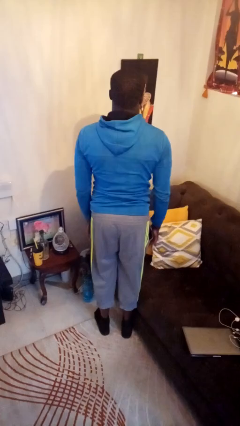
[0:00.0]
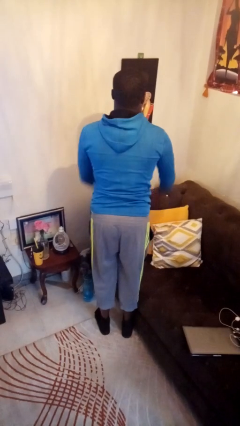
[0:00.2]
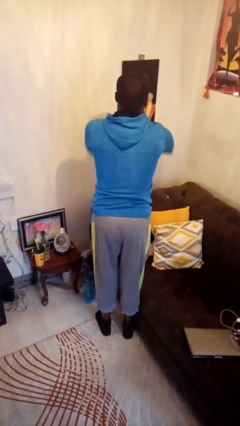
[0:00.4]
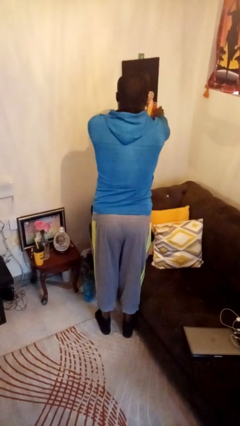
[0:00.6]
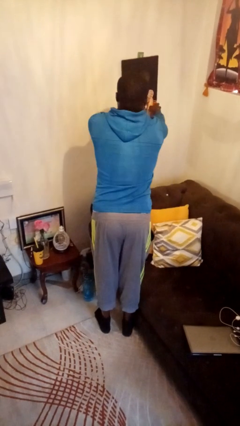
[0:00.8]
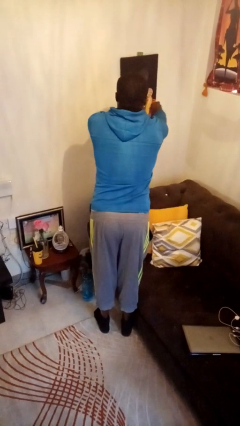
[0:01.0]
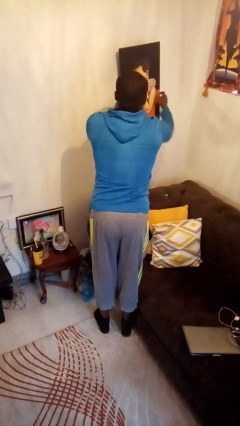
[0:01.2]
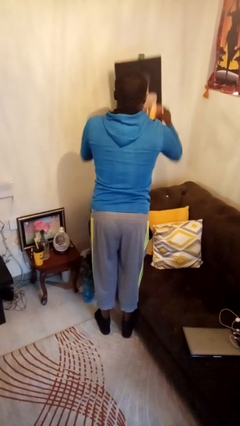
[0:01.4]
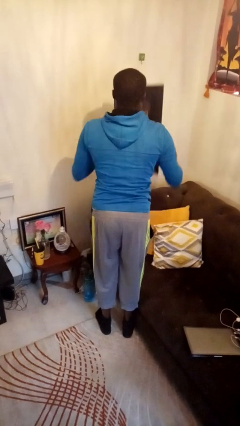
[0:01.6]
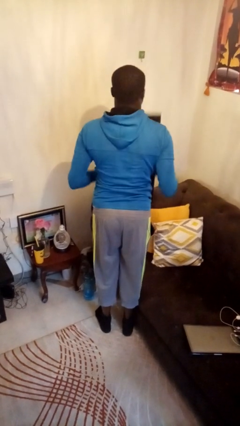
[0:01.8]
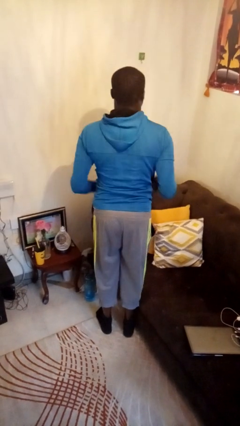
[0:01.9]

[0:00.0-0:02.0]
person takes down picture frame

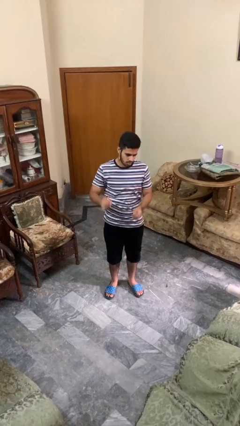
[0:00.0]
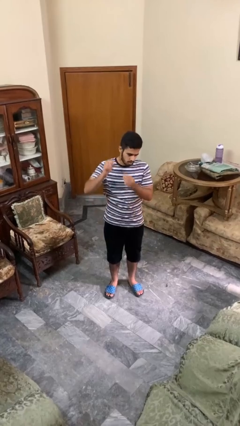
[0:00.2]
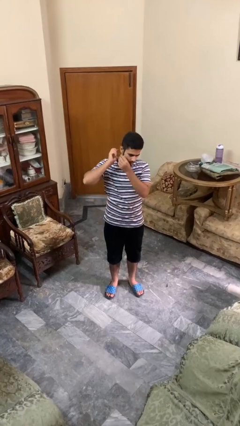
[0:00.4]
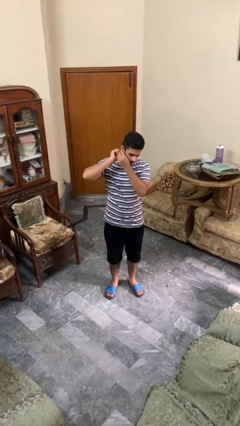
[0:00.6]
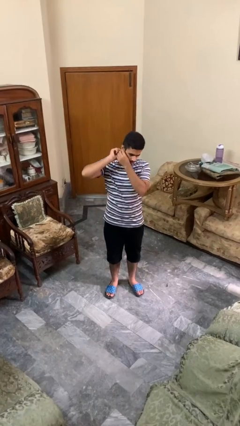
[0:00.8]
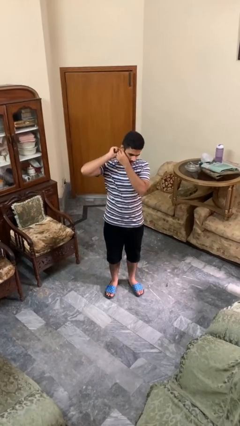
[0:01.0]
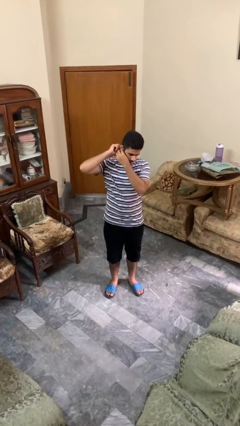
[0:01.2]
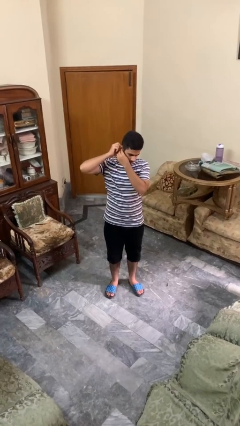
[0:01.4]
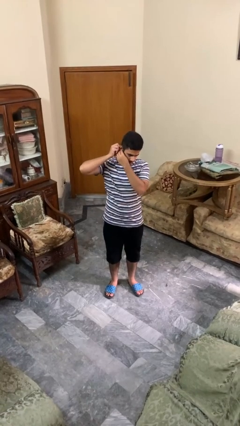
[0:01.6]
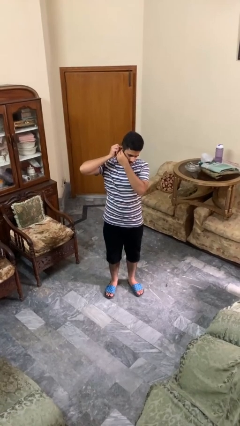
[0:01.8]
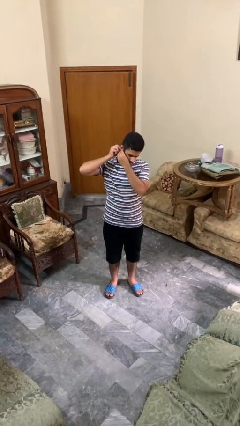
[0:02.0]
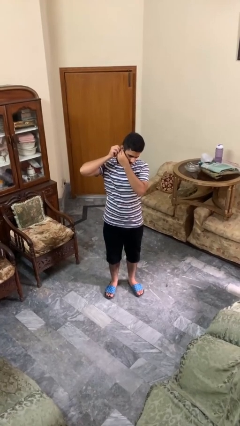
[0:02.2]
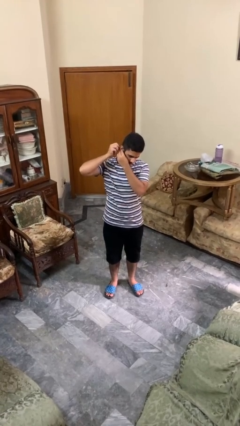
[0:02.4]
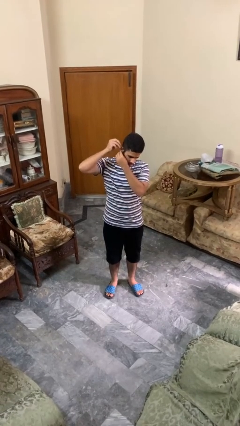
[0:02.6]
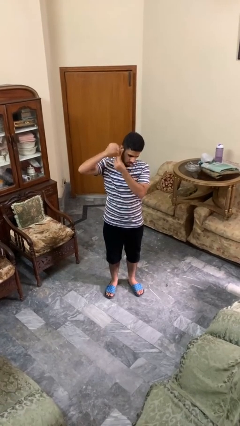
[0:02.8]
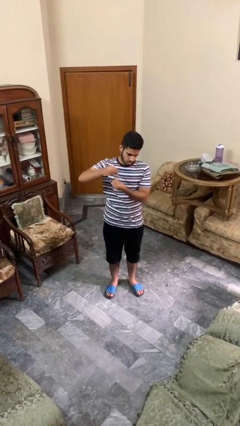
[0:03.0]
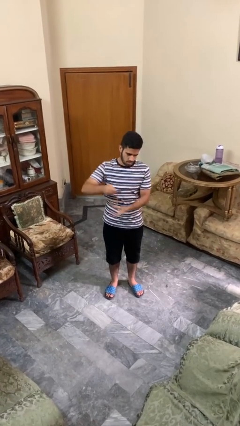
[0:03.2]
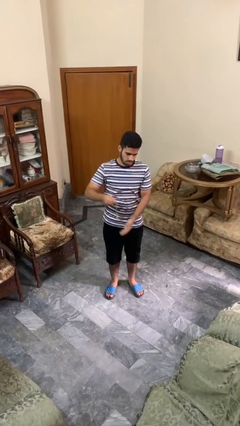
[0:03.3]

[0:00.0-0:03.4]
person takes off earrings

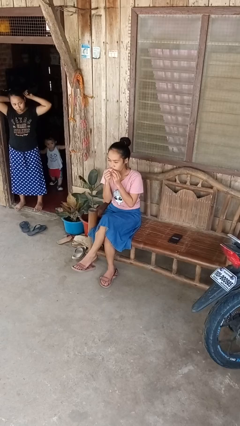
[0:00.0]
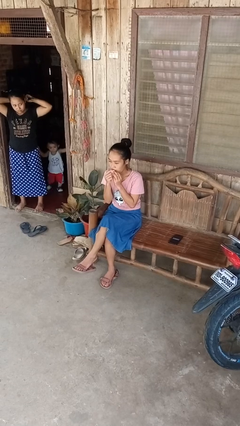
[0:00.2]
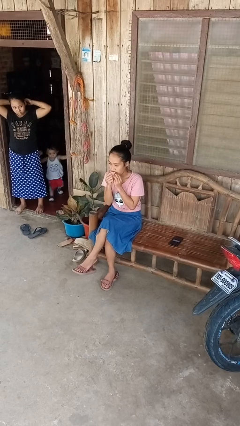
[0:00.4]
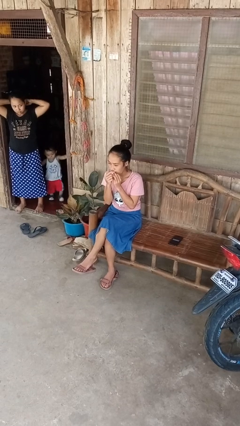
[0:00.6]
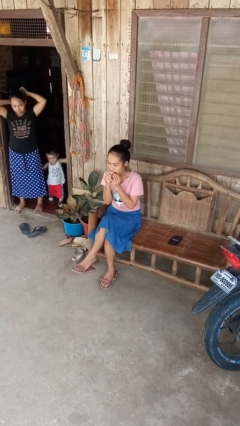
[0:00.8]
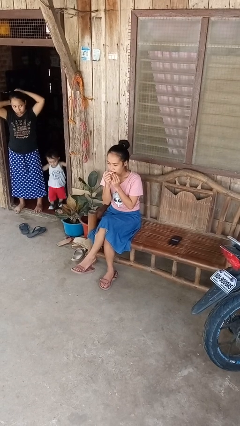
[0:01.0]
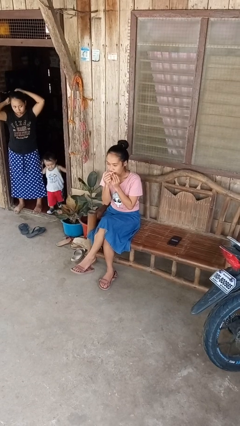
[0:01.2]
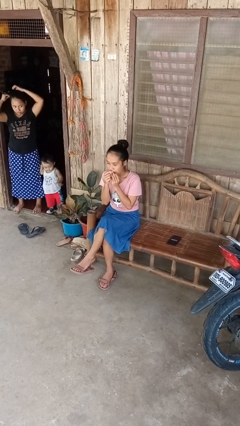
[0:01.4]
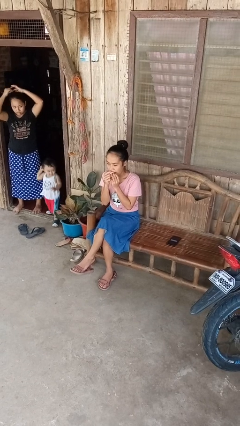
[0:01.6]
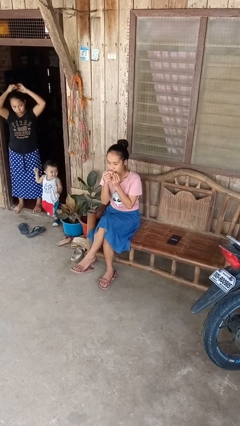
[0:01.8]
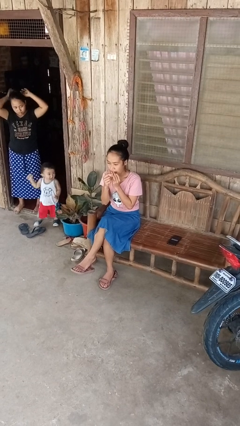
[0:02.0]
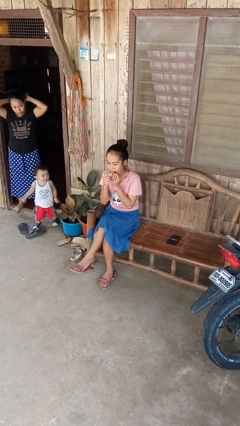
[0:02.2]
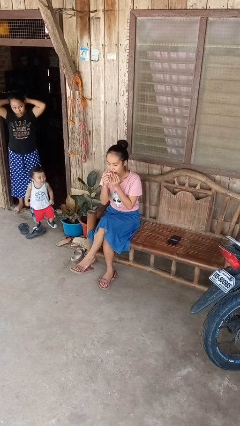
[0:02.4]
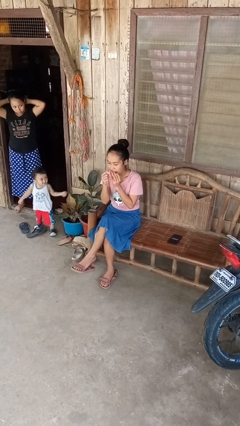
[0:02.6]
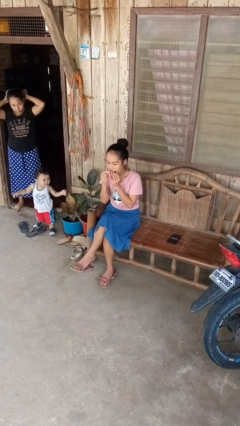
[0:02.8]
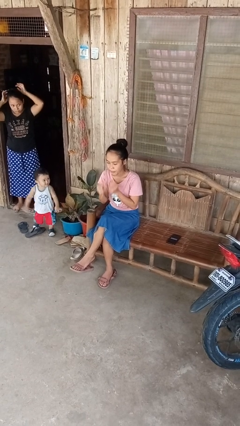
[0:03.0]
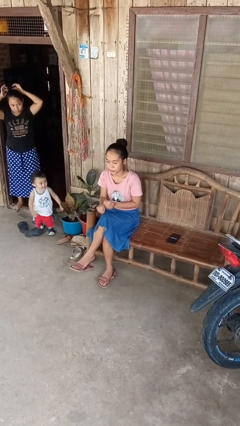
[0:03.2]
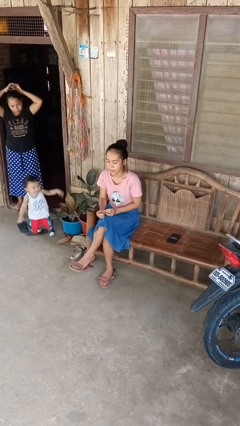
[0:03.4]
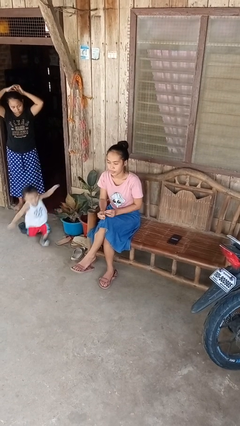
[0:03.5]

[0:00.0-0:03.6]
person flosses

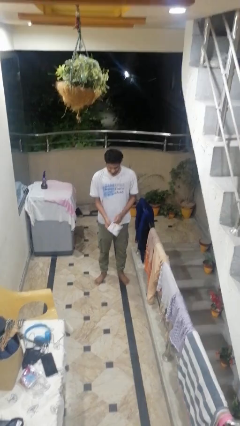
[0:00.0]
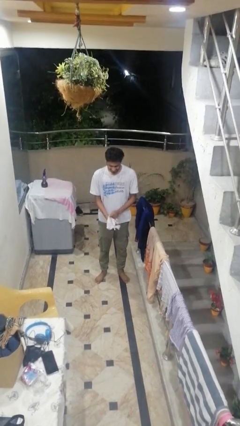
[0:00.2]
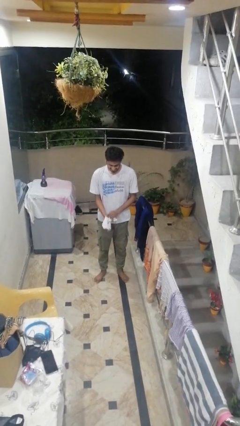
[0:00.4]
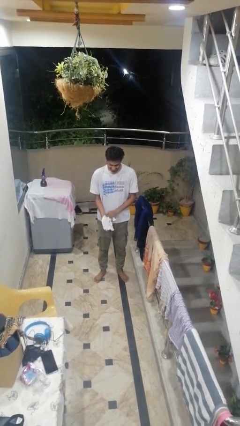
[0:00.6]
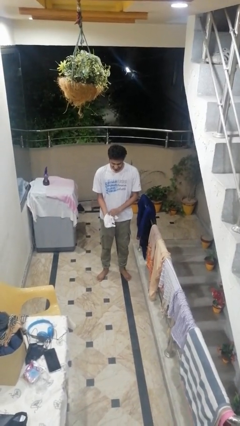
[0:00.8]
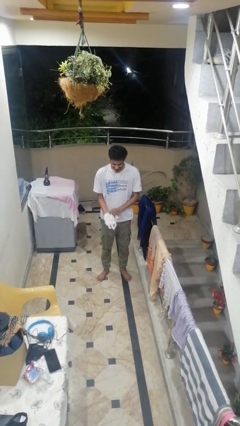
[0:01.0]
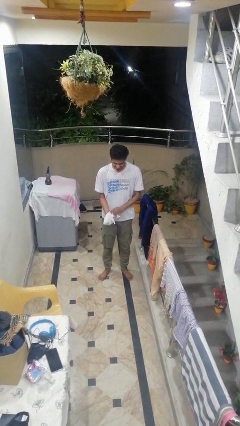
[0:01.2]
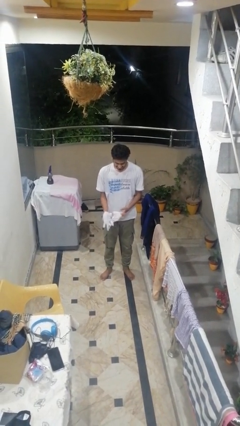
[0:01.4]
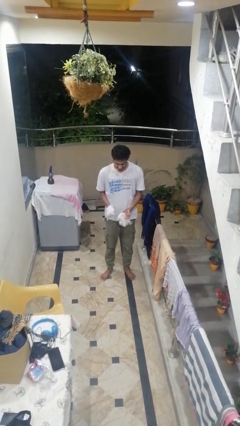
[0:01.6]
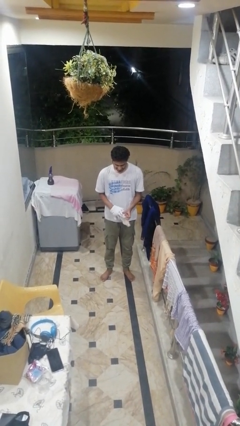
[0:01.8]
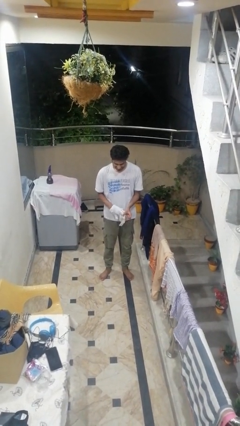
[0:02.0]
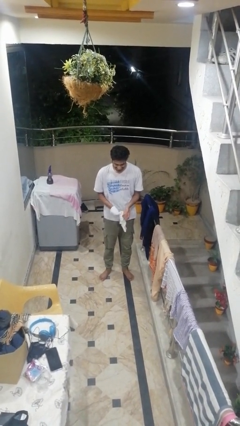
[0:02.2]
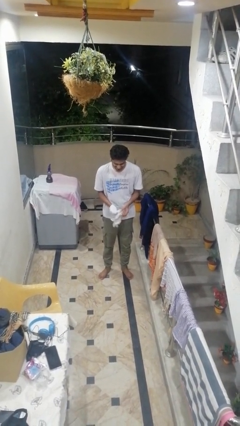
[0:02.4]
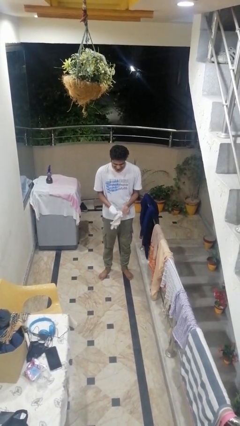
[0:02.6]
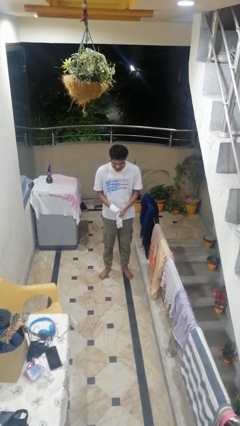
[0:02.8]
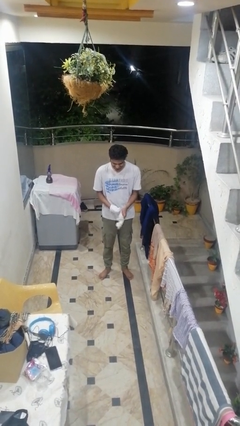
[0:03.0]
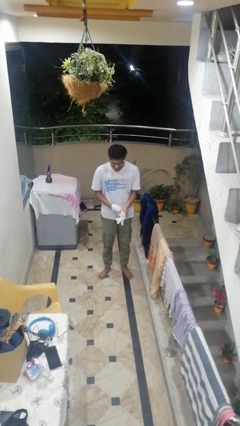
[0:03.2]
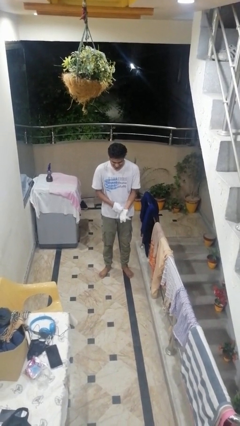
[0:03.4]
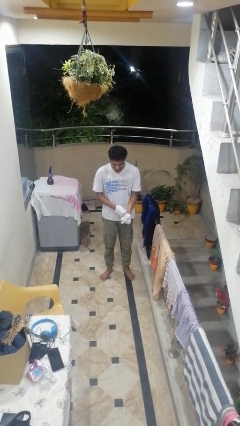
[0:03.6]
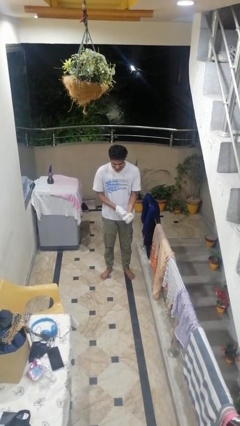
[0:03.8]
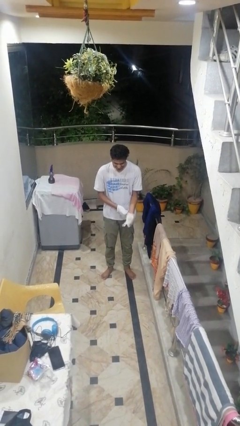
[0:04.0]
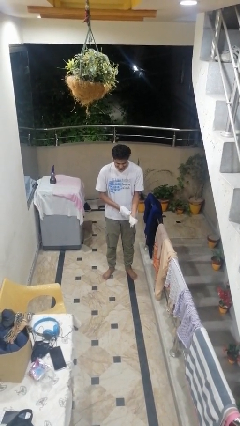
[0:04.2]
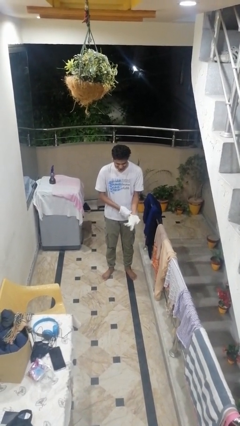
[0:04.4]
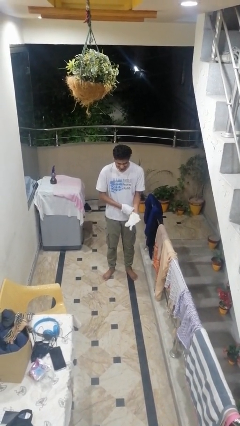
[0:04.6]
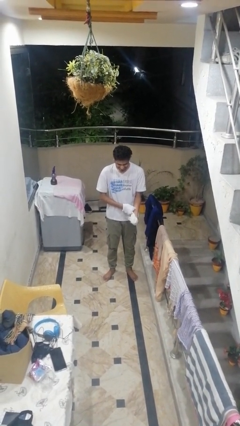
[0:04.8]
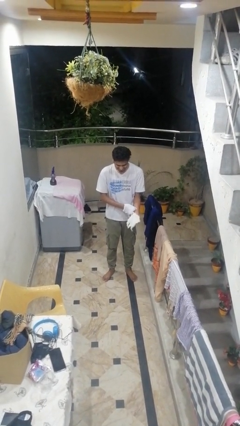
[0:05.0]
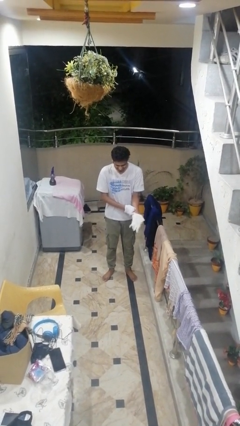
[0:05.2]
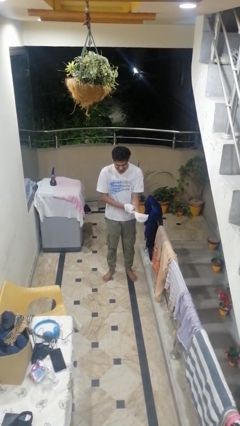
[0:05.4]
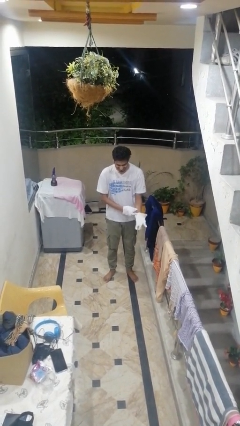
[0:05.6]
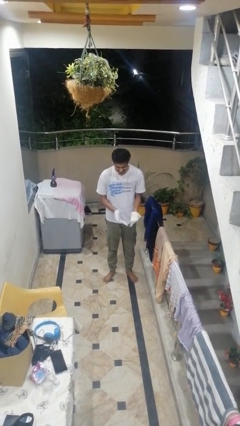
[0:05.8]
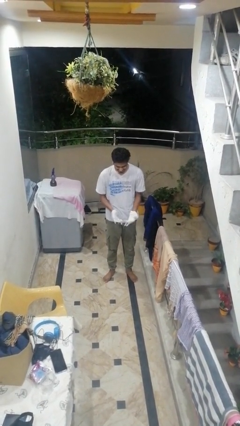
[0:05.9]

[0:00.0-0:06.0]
person puts on gloves

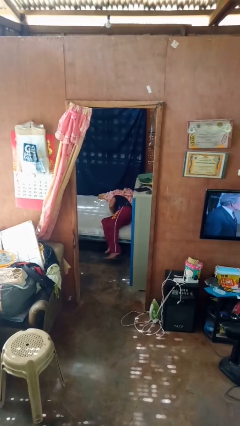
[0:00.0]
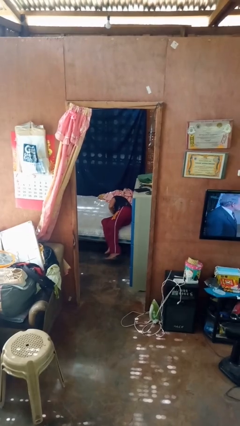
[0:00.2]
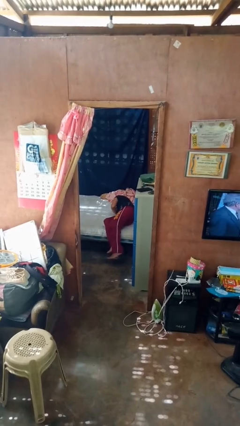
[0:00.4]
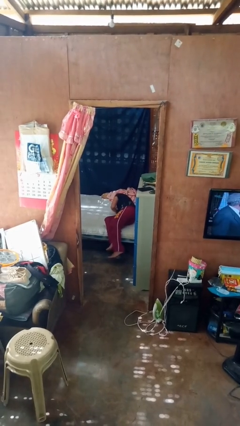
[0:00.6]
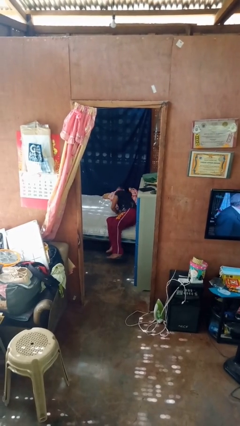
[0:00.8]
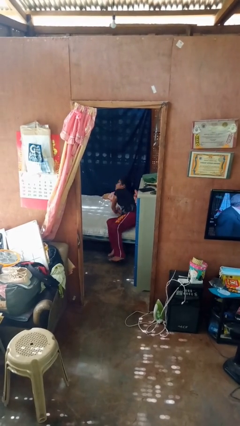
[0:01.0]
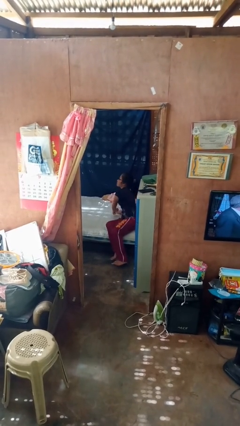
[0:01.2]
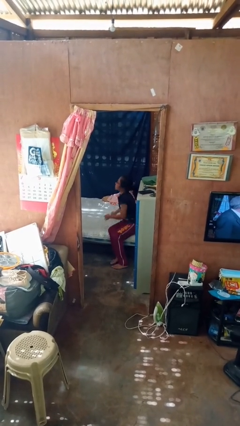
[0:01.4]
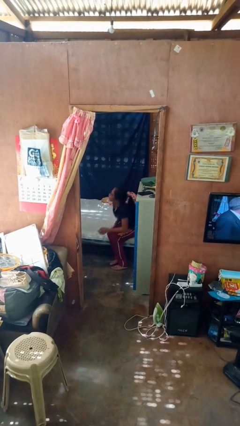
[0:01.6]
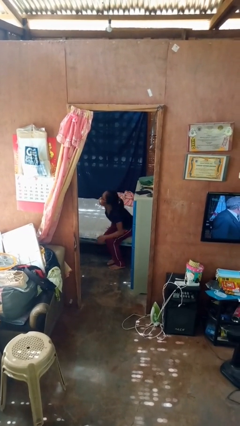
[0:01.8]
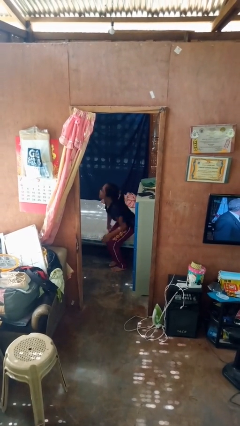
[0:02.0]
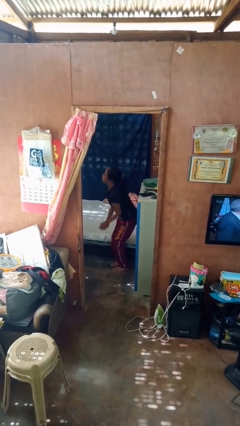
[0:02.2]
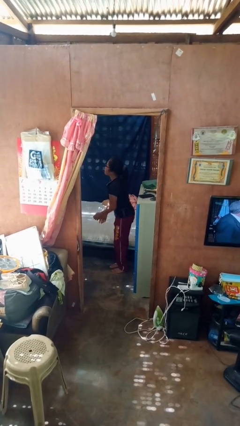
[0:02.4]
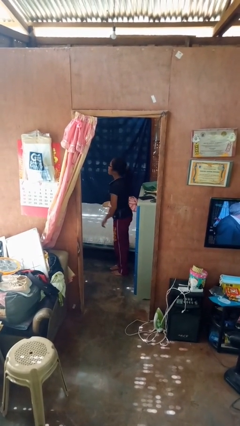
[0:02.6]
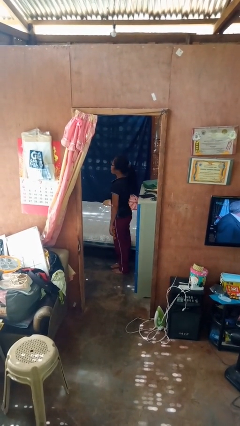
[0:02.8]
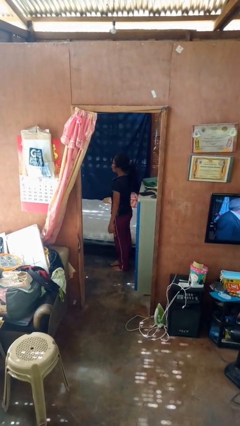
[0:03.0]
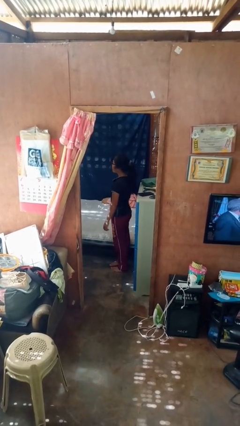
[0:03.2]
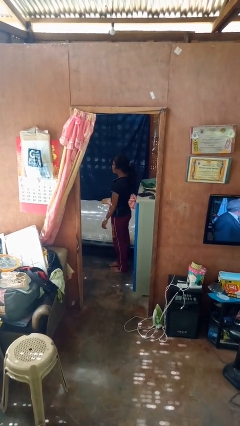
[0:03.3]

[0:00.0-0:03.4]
person stands up
